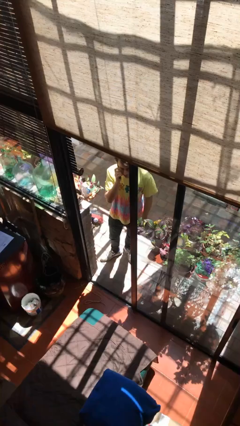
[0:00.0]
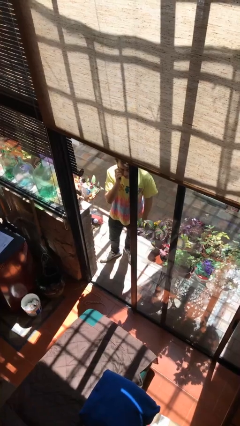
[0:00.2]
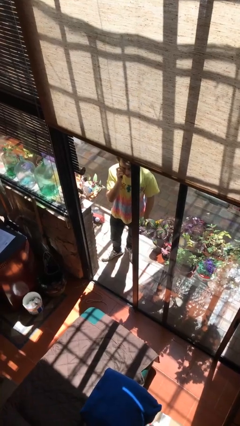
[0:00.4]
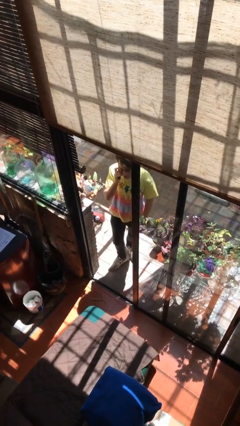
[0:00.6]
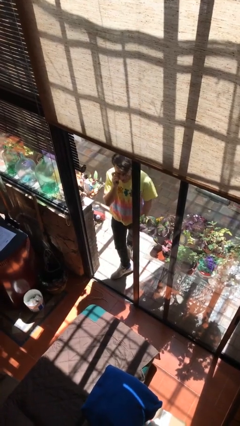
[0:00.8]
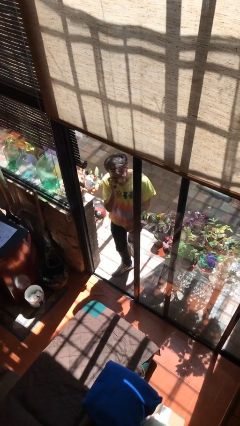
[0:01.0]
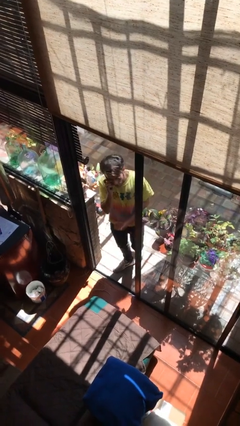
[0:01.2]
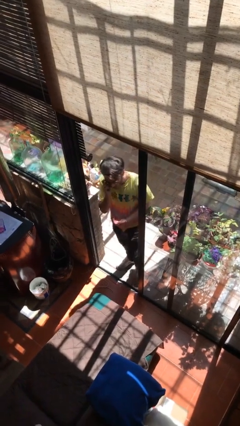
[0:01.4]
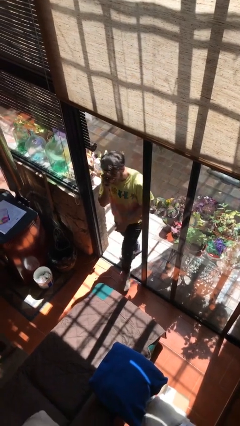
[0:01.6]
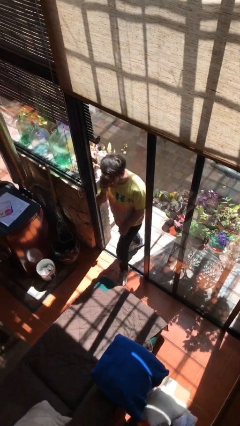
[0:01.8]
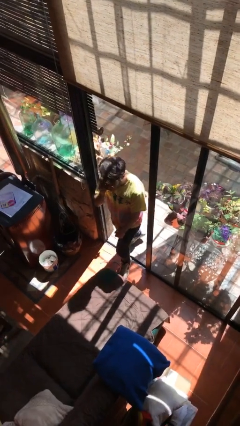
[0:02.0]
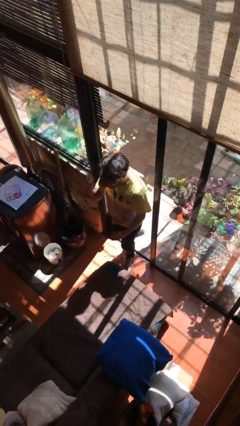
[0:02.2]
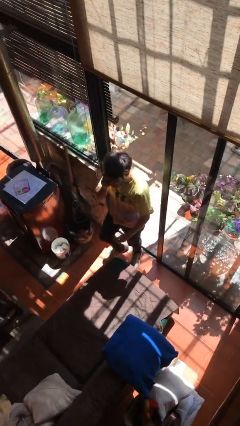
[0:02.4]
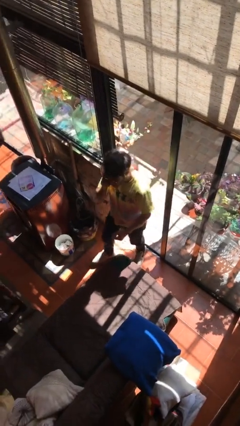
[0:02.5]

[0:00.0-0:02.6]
person enters scene through structure

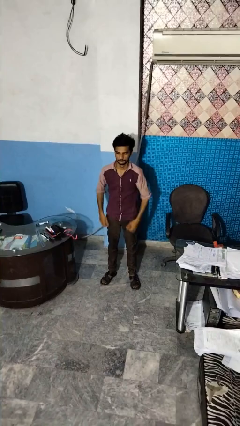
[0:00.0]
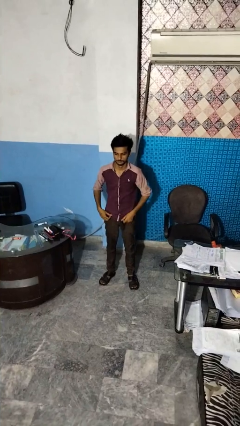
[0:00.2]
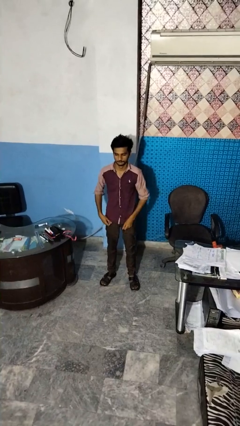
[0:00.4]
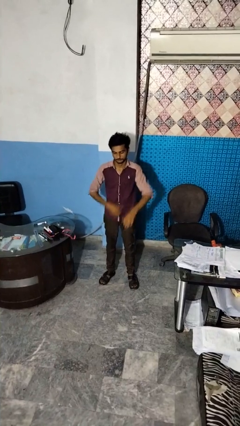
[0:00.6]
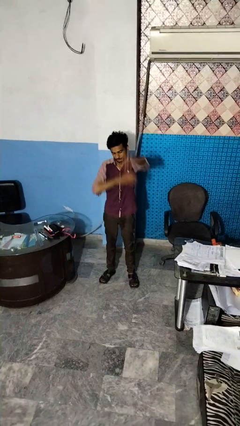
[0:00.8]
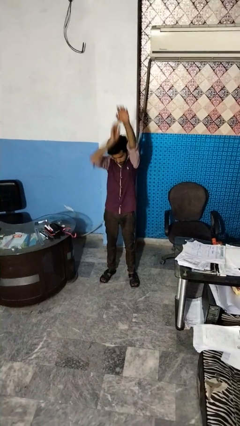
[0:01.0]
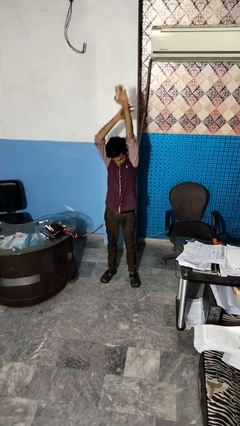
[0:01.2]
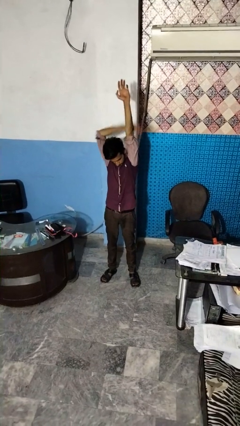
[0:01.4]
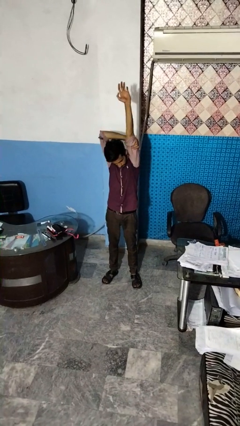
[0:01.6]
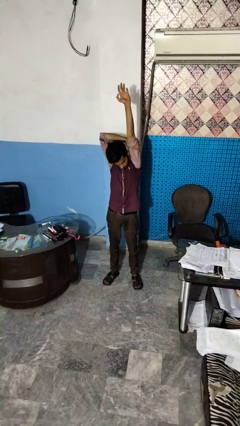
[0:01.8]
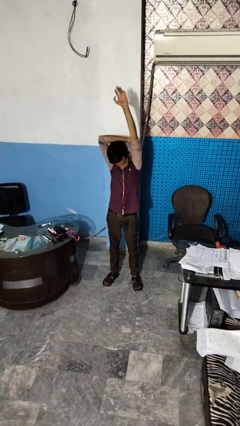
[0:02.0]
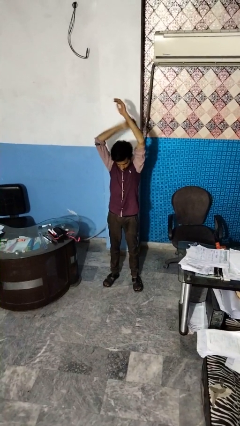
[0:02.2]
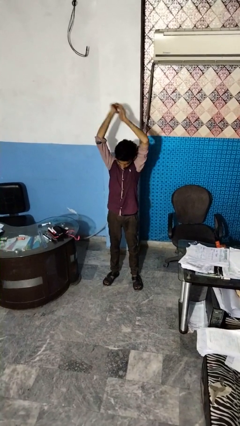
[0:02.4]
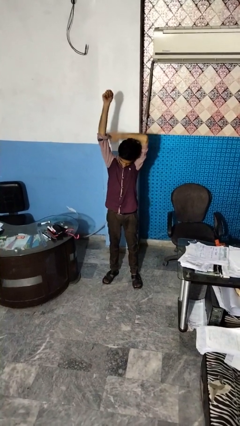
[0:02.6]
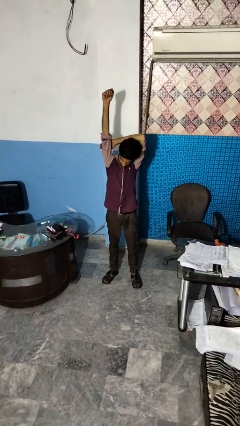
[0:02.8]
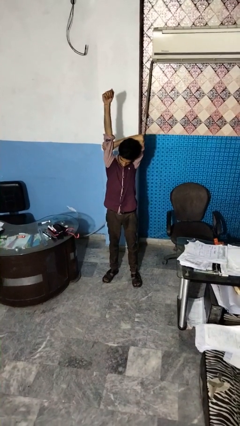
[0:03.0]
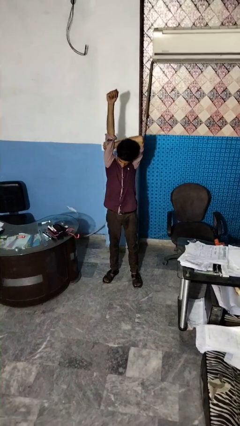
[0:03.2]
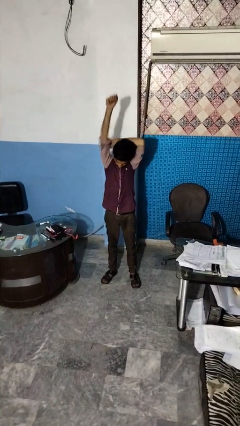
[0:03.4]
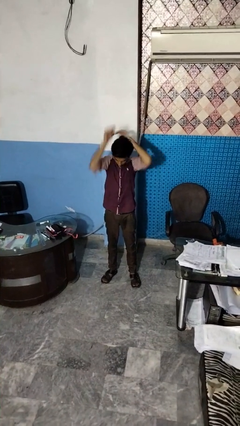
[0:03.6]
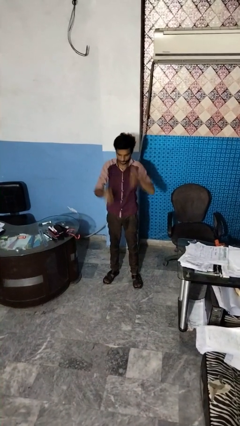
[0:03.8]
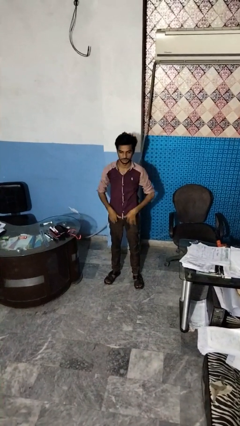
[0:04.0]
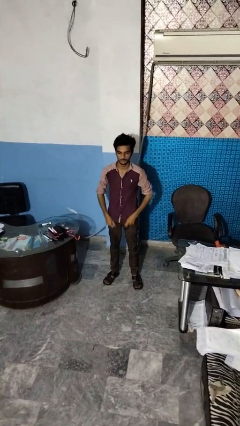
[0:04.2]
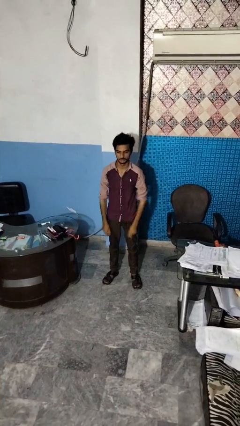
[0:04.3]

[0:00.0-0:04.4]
person stretches arms over head

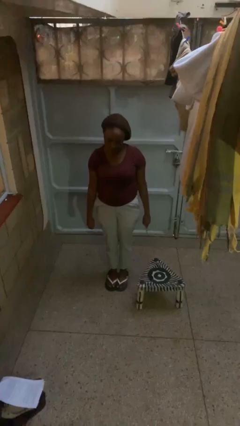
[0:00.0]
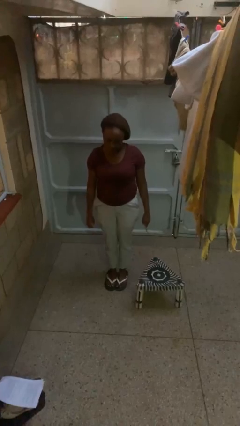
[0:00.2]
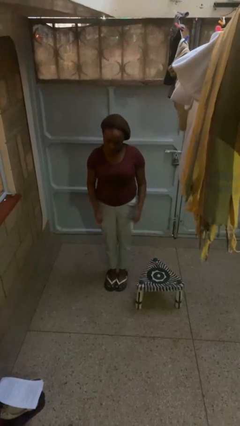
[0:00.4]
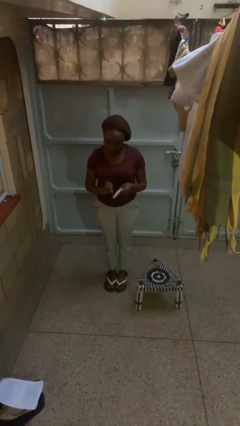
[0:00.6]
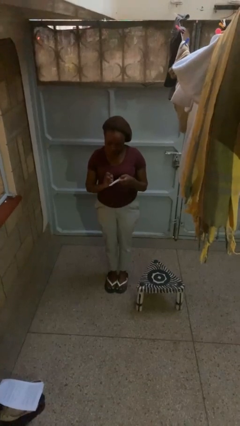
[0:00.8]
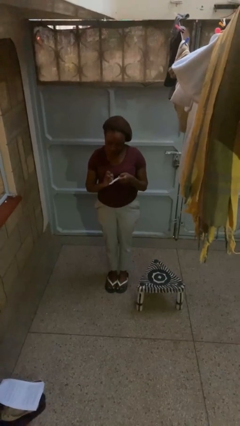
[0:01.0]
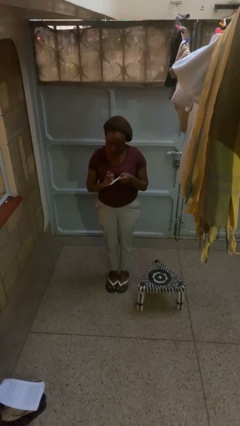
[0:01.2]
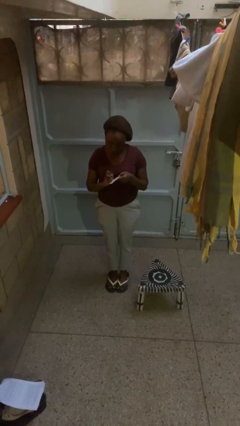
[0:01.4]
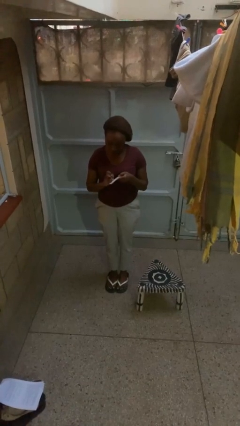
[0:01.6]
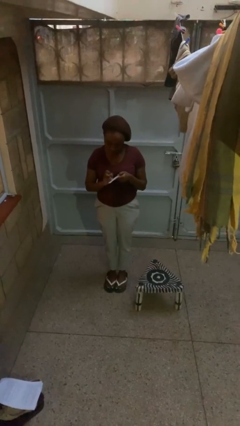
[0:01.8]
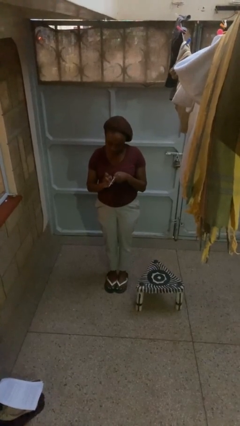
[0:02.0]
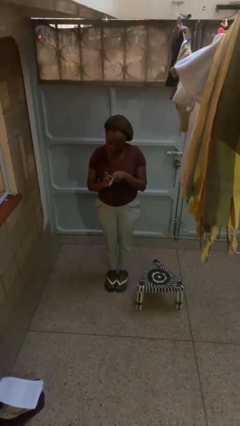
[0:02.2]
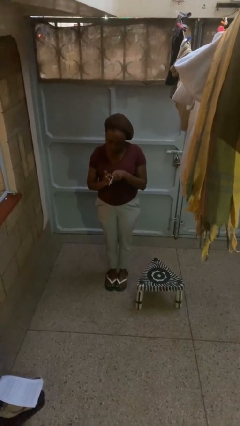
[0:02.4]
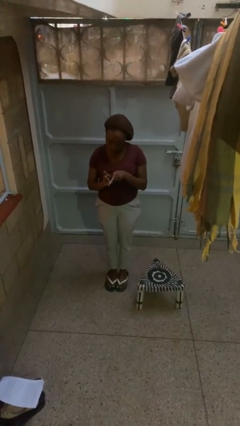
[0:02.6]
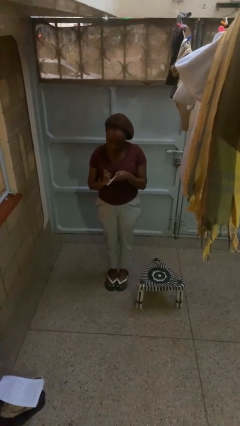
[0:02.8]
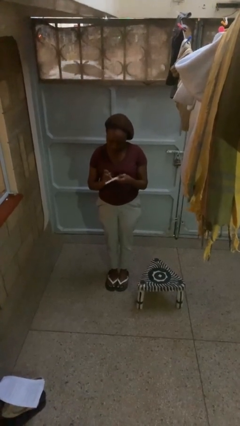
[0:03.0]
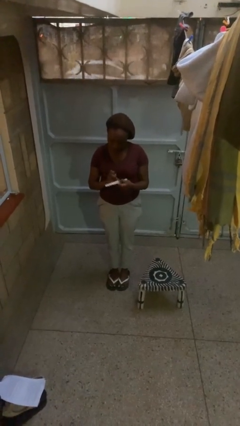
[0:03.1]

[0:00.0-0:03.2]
person files fingernails

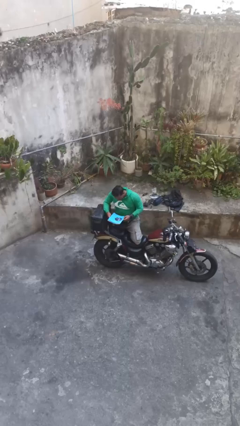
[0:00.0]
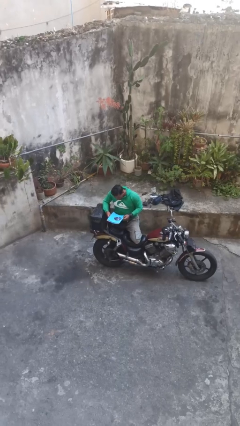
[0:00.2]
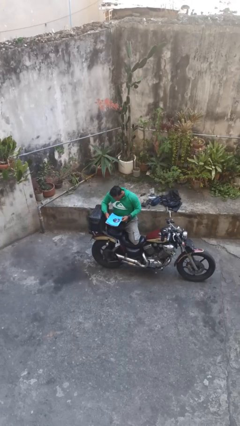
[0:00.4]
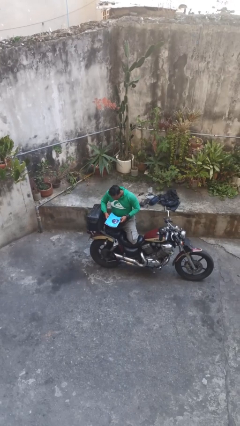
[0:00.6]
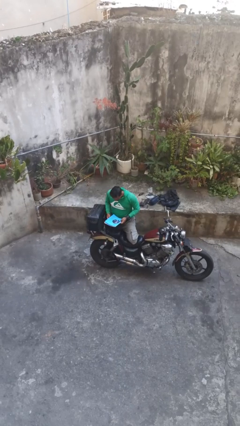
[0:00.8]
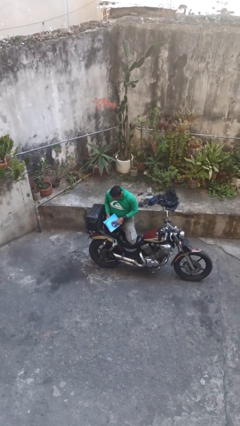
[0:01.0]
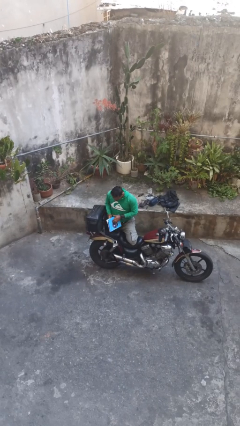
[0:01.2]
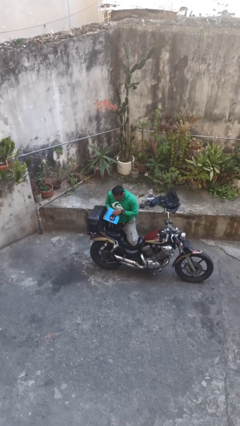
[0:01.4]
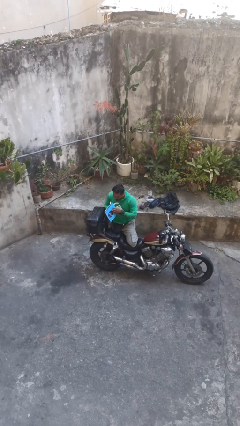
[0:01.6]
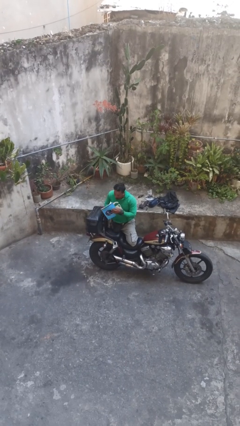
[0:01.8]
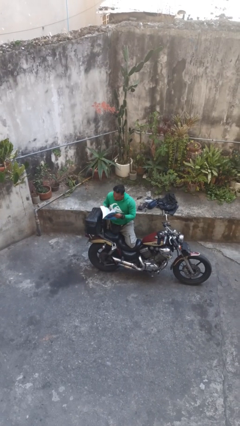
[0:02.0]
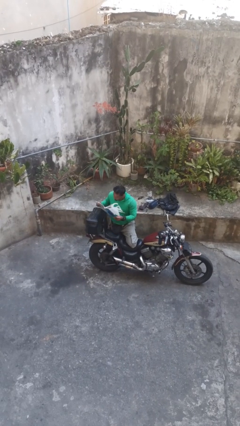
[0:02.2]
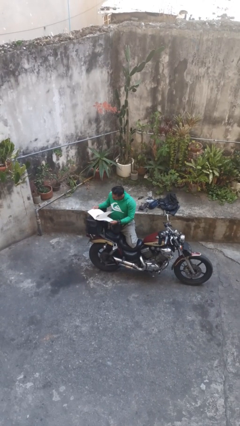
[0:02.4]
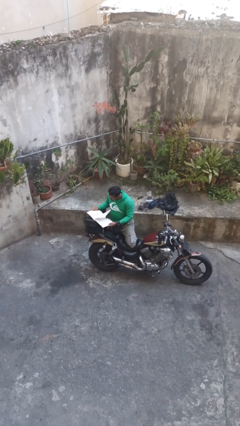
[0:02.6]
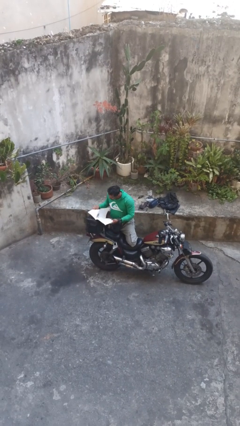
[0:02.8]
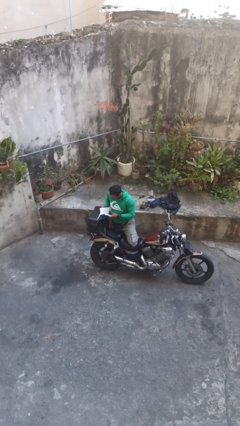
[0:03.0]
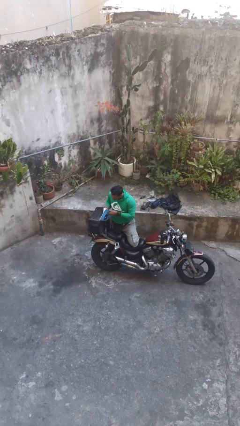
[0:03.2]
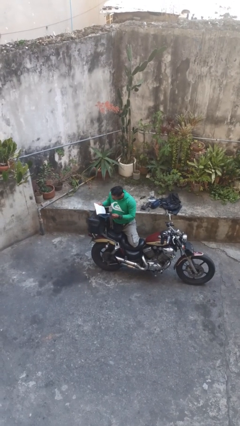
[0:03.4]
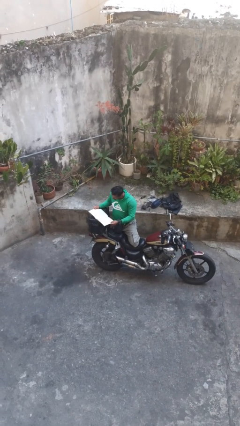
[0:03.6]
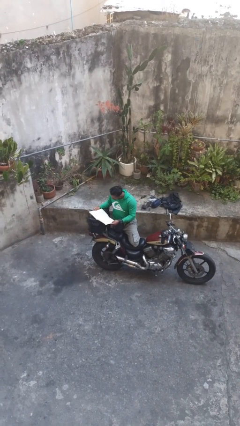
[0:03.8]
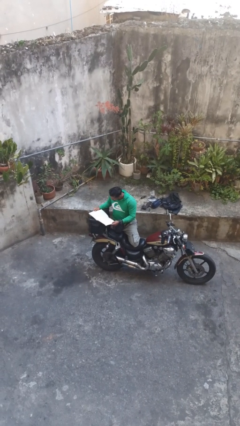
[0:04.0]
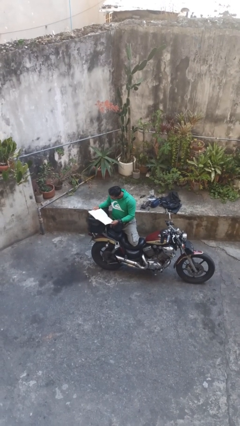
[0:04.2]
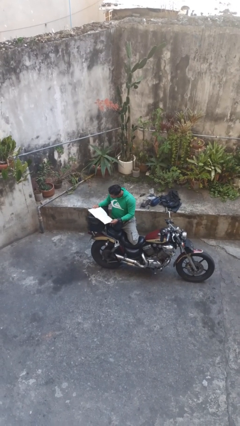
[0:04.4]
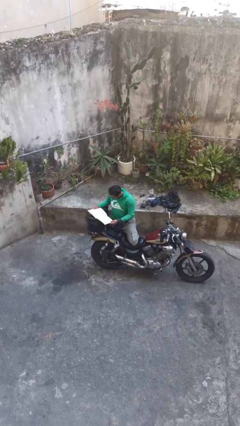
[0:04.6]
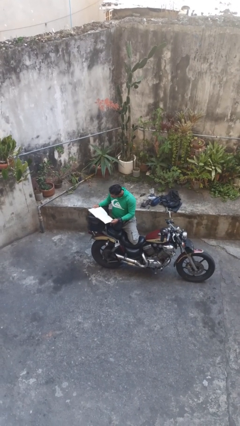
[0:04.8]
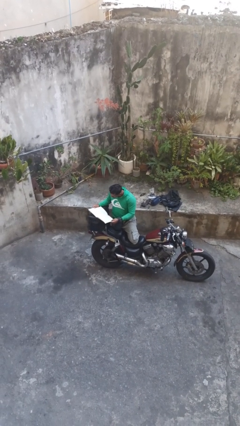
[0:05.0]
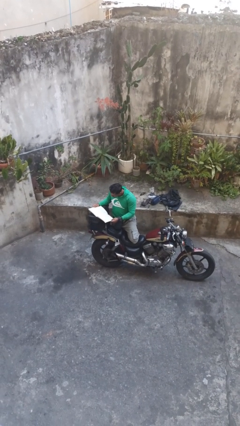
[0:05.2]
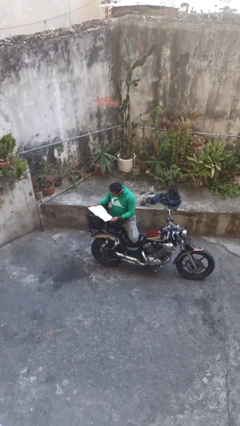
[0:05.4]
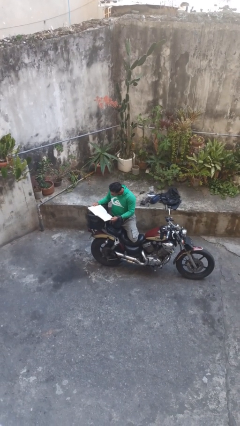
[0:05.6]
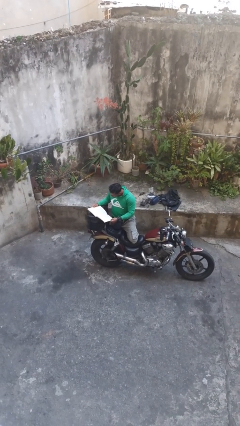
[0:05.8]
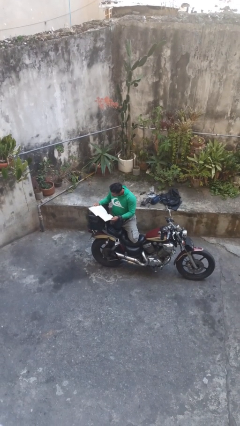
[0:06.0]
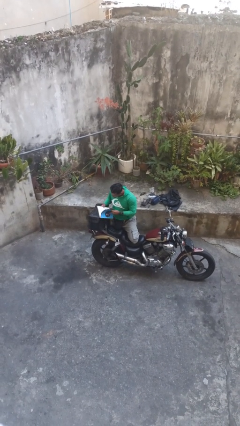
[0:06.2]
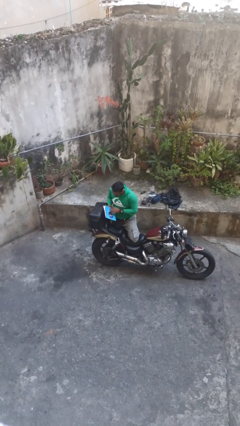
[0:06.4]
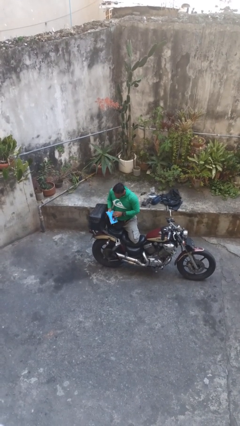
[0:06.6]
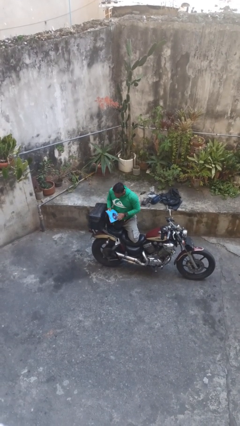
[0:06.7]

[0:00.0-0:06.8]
person reads document

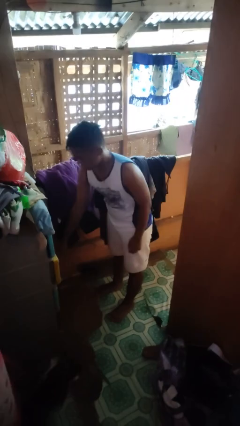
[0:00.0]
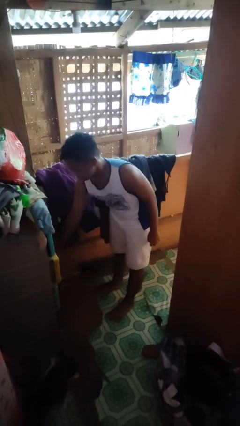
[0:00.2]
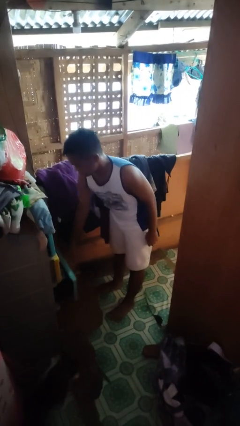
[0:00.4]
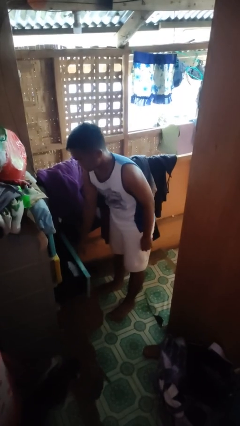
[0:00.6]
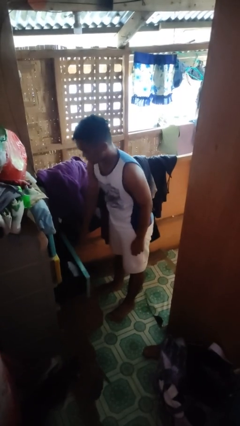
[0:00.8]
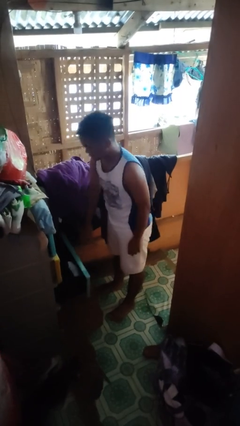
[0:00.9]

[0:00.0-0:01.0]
person opens dresser drawer
